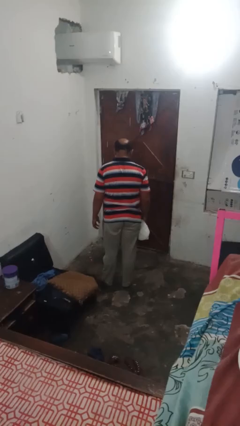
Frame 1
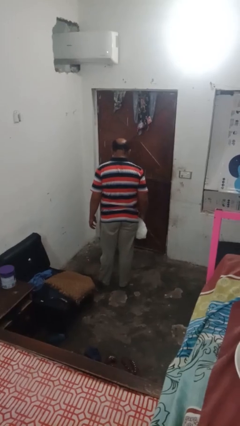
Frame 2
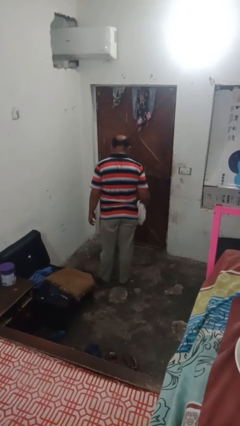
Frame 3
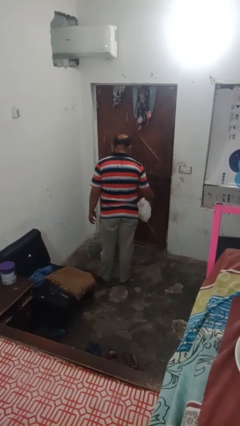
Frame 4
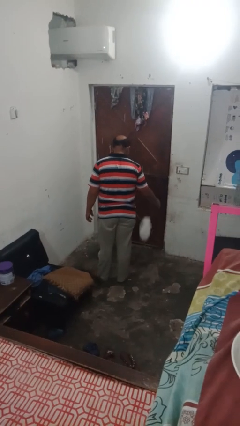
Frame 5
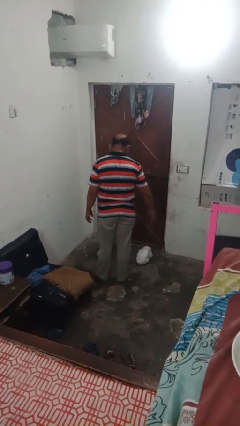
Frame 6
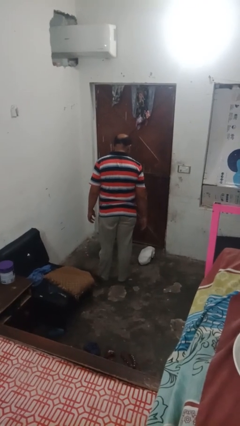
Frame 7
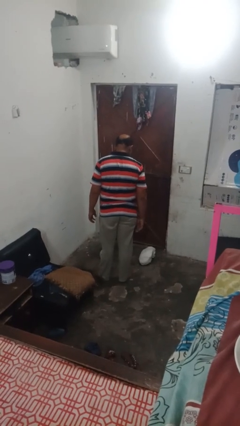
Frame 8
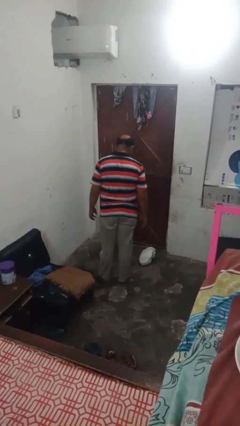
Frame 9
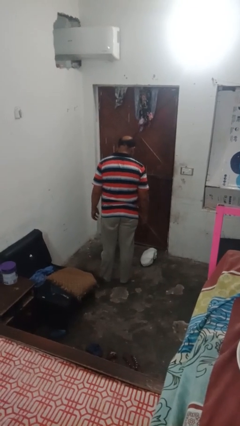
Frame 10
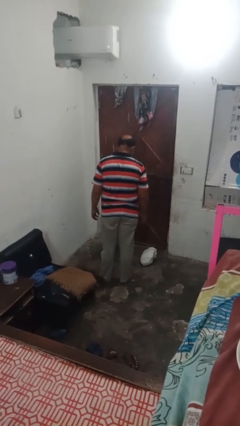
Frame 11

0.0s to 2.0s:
person throws object to ground

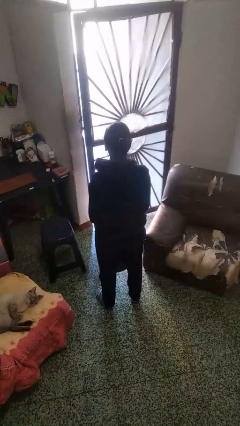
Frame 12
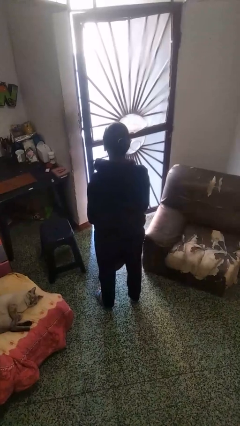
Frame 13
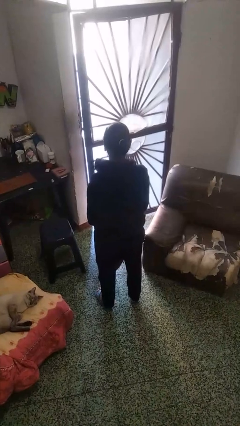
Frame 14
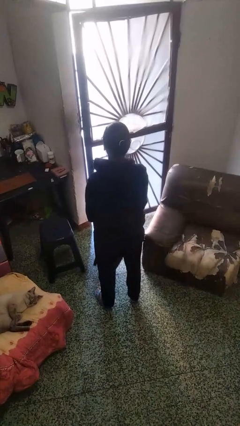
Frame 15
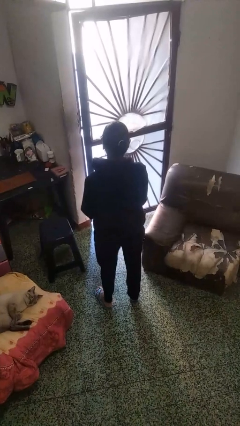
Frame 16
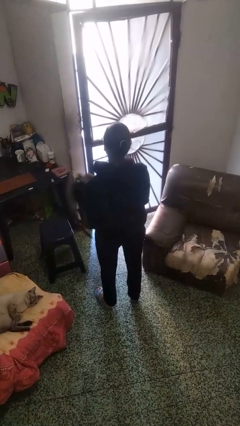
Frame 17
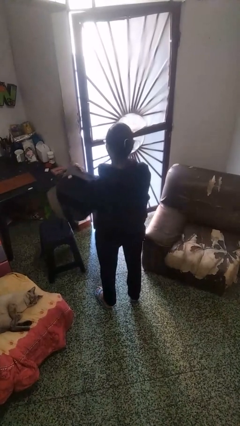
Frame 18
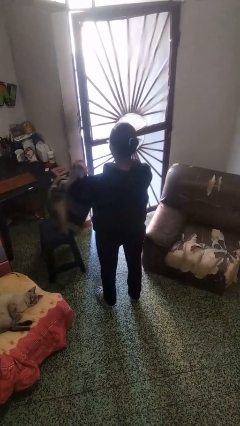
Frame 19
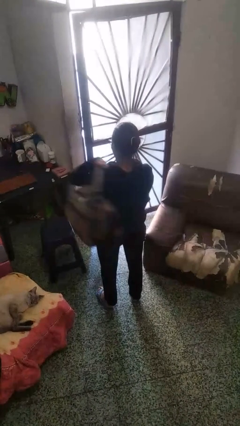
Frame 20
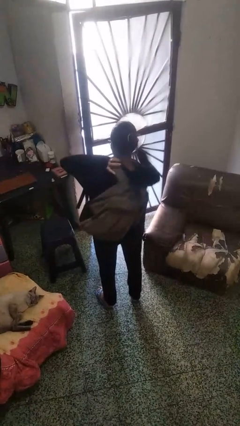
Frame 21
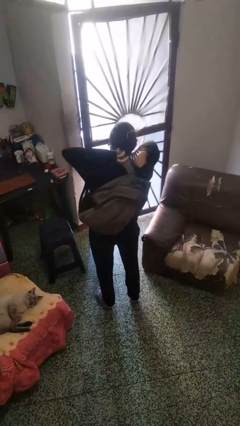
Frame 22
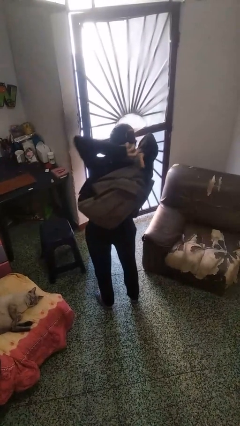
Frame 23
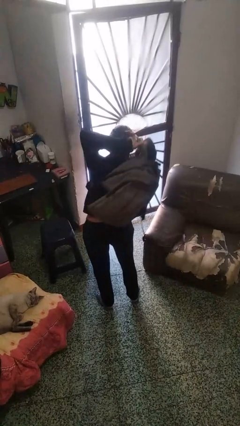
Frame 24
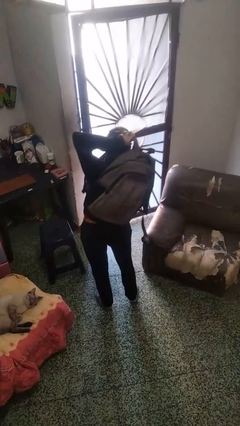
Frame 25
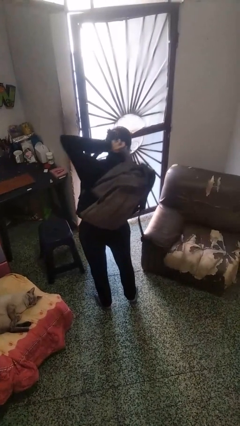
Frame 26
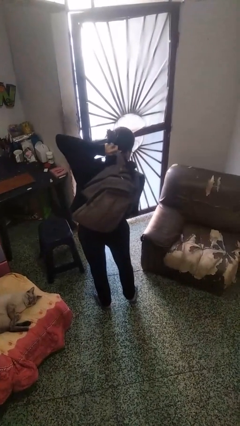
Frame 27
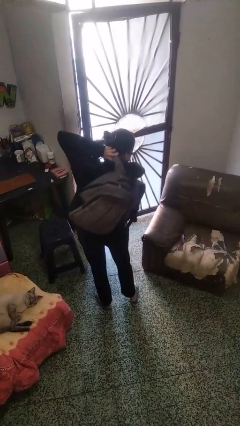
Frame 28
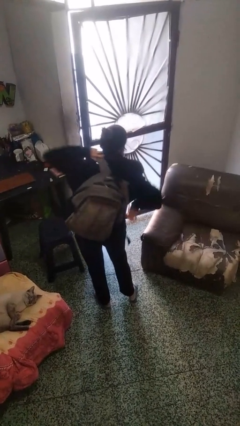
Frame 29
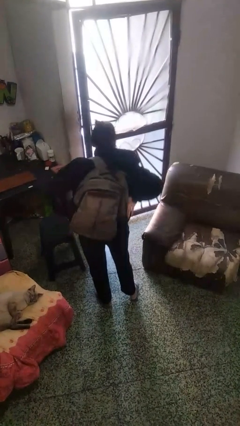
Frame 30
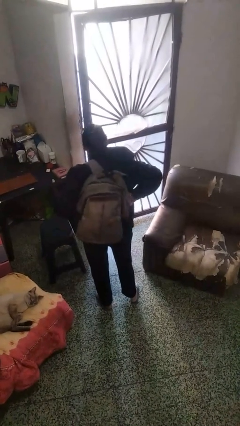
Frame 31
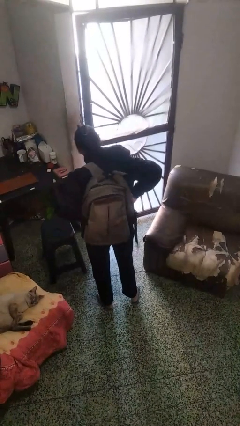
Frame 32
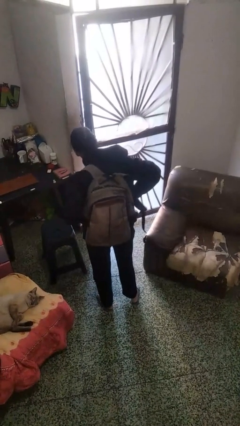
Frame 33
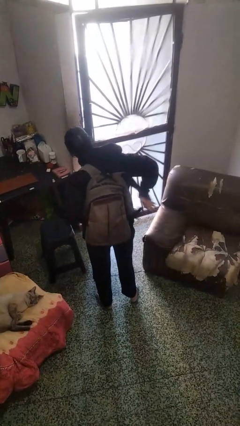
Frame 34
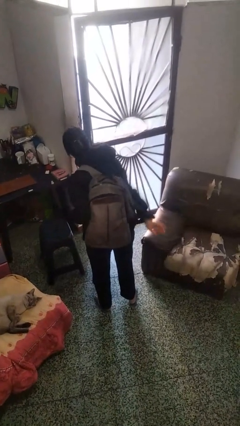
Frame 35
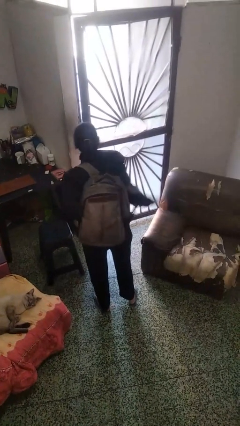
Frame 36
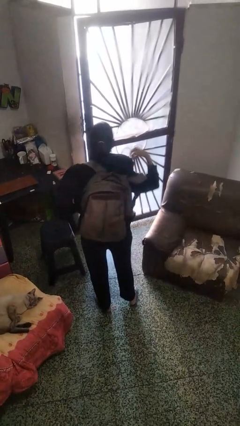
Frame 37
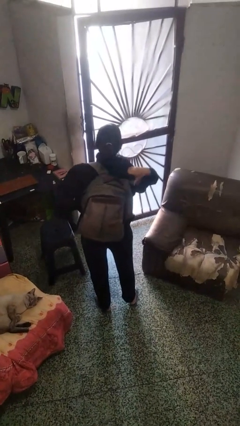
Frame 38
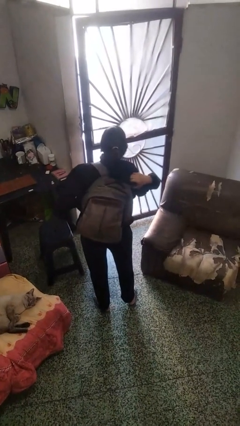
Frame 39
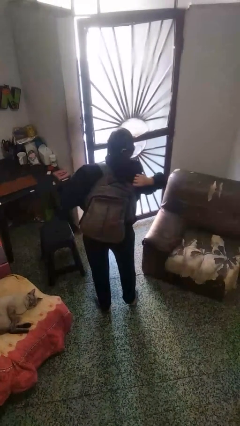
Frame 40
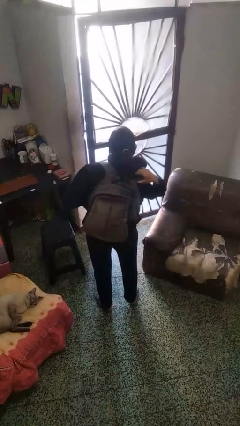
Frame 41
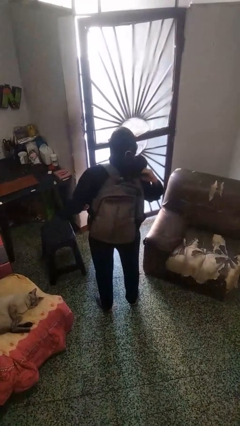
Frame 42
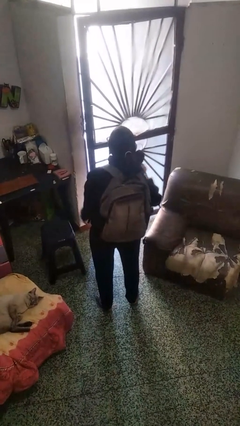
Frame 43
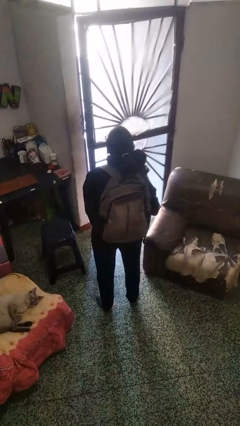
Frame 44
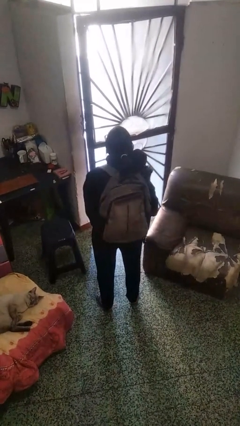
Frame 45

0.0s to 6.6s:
person puts on backpack

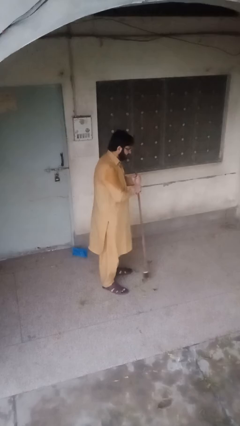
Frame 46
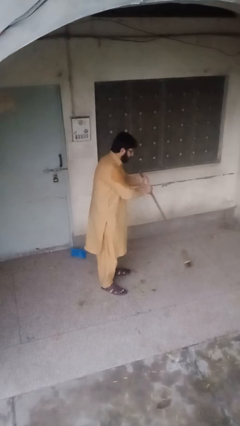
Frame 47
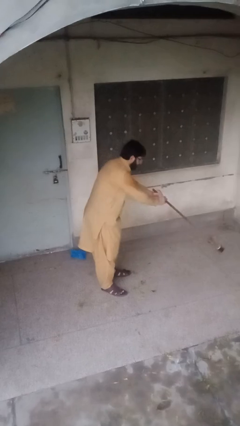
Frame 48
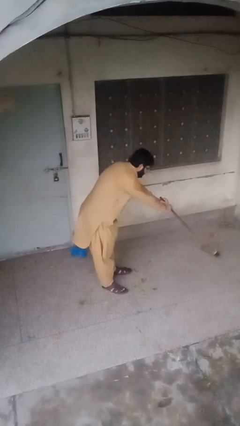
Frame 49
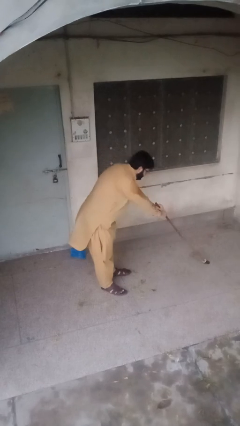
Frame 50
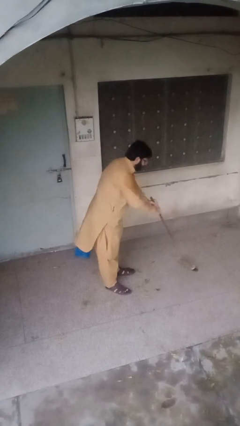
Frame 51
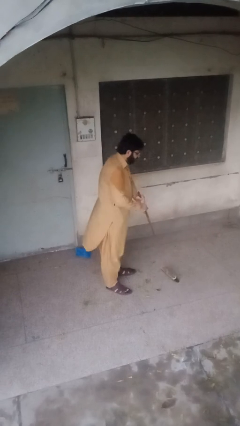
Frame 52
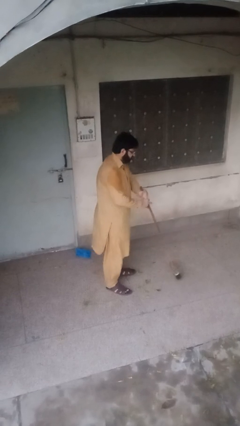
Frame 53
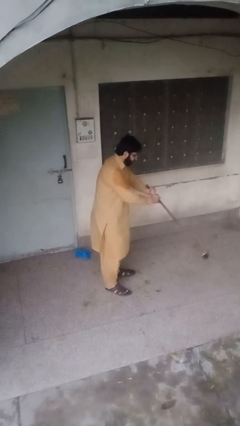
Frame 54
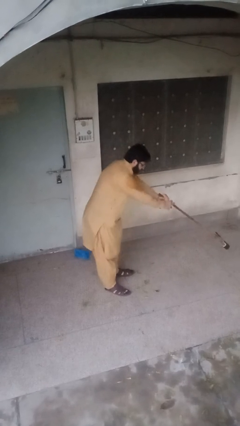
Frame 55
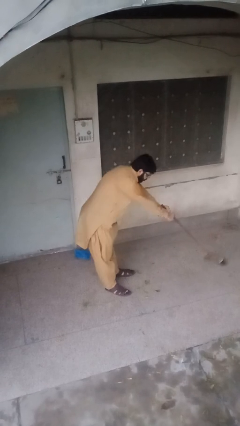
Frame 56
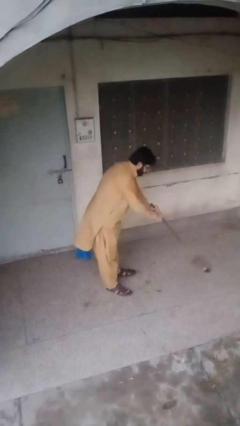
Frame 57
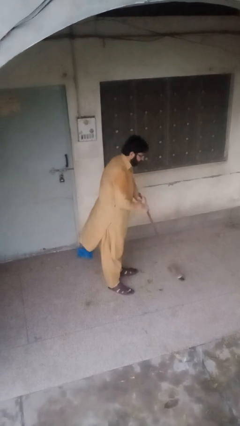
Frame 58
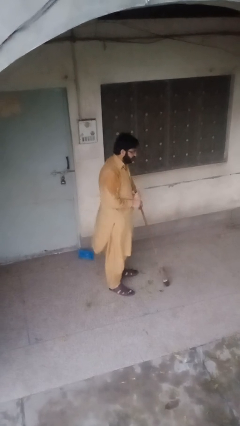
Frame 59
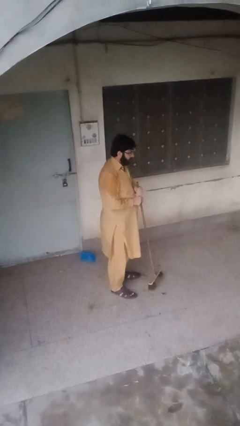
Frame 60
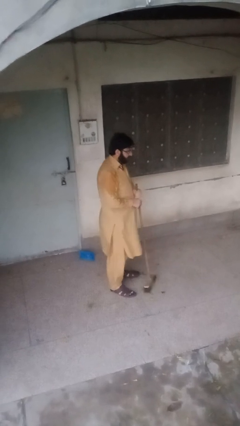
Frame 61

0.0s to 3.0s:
person sweeps floor

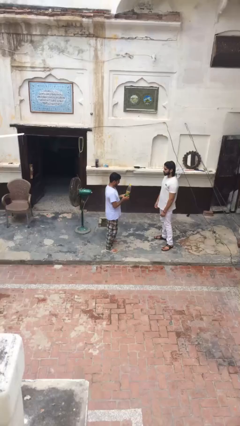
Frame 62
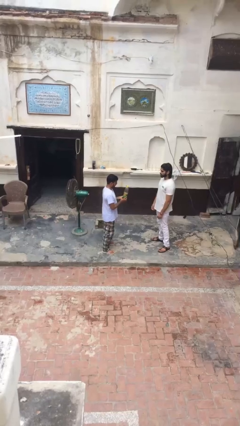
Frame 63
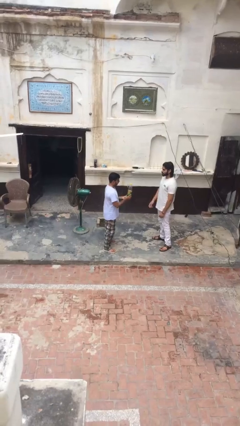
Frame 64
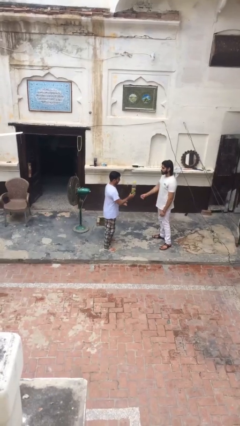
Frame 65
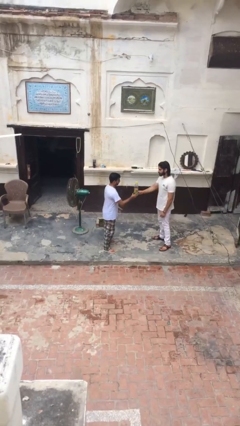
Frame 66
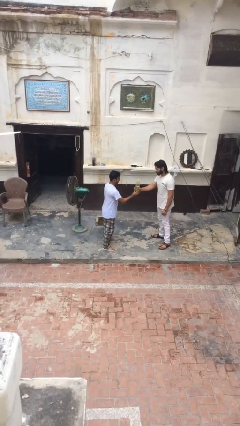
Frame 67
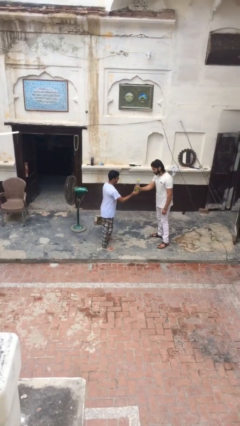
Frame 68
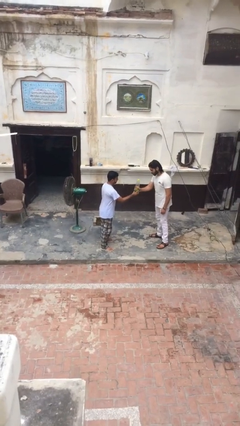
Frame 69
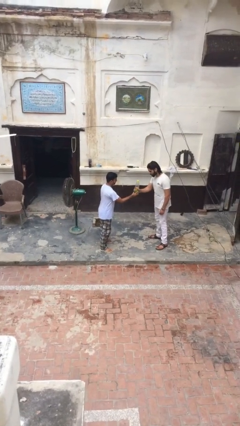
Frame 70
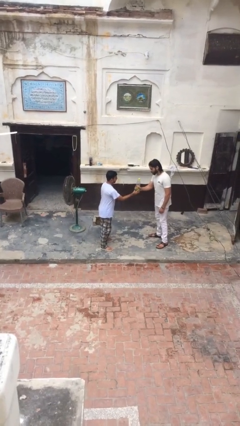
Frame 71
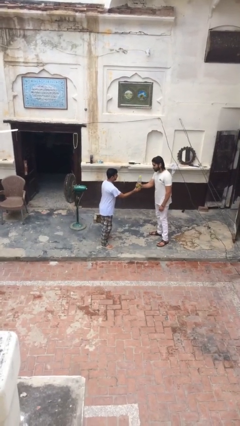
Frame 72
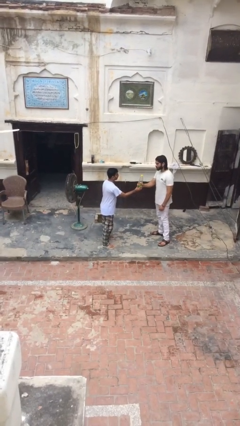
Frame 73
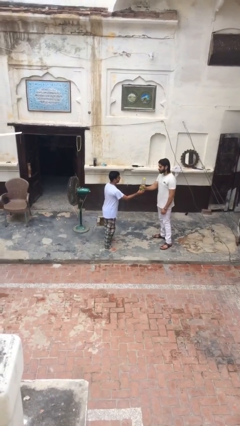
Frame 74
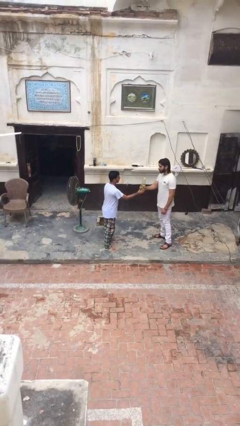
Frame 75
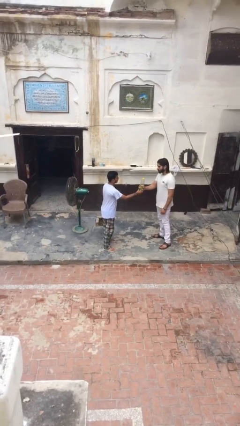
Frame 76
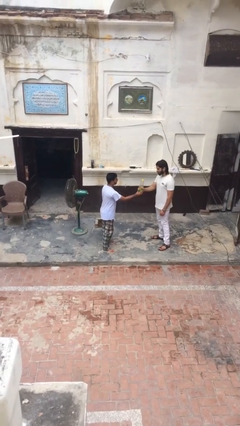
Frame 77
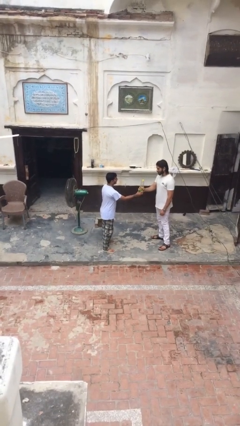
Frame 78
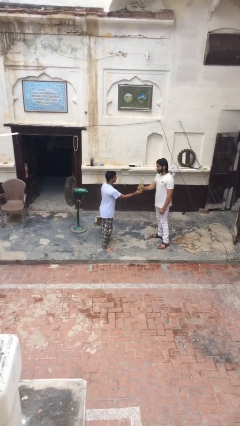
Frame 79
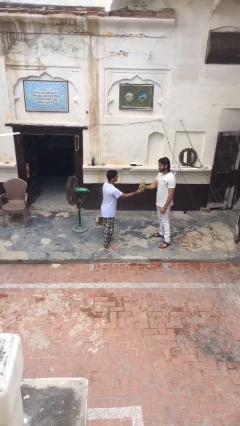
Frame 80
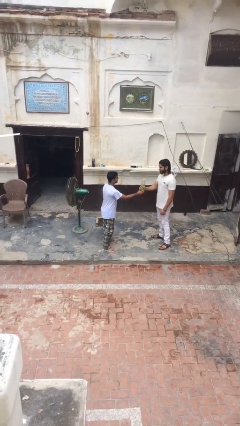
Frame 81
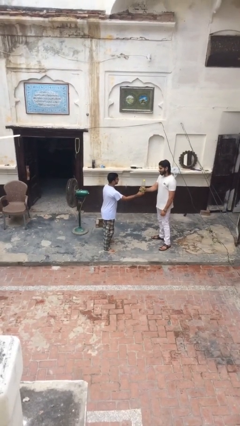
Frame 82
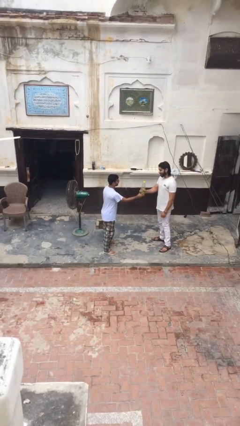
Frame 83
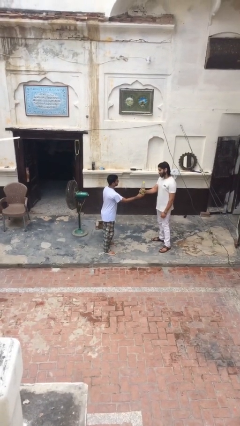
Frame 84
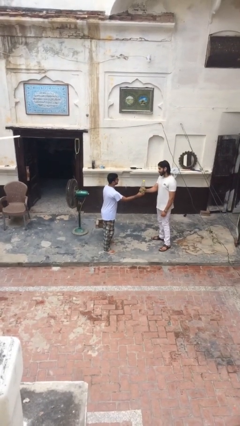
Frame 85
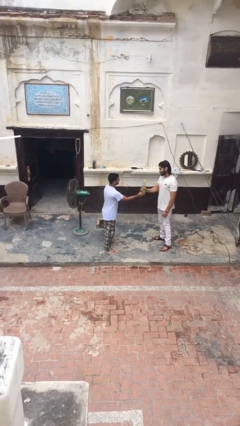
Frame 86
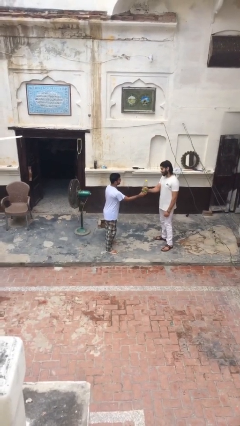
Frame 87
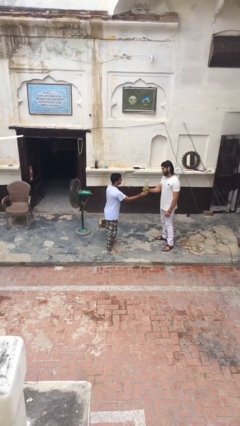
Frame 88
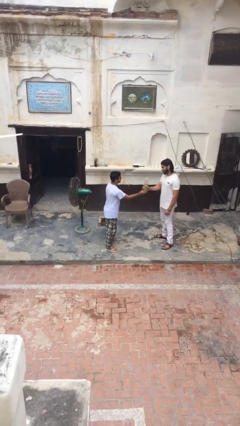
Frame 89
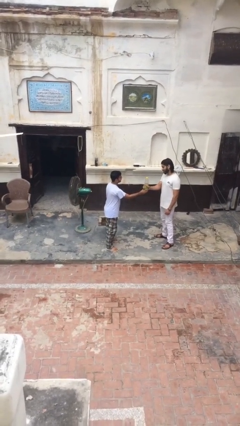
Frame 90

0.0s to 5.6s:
person transfers object to person

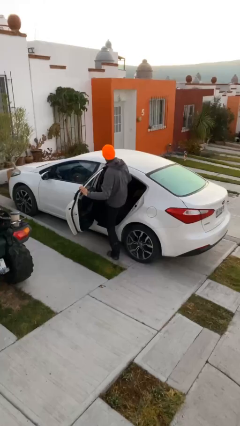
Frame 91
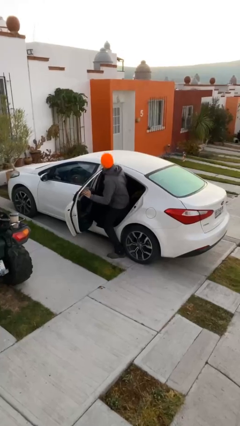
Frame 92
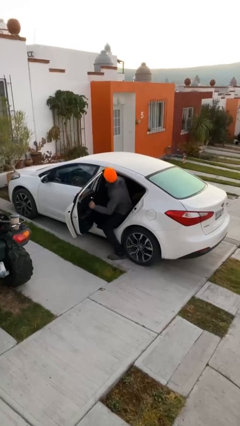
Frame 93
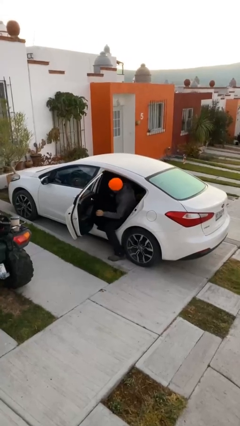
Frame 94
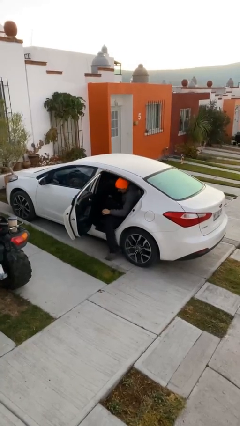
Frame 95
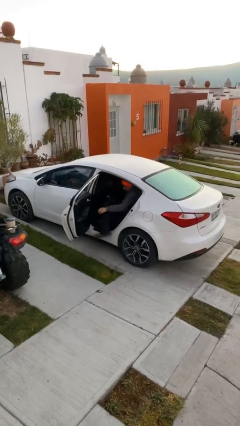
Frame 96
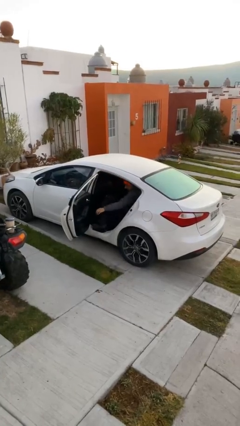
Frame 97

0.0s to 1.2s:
person enters car
